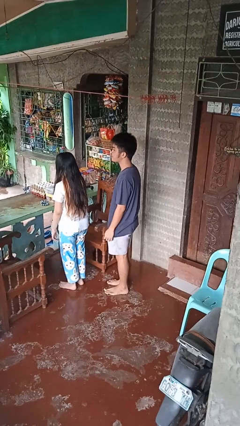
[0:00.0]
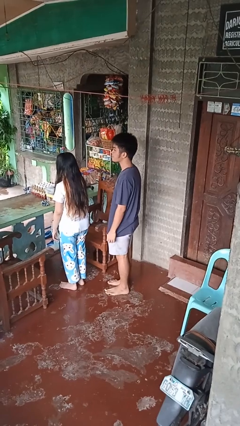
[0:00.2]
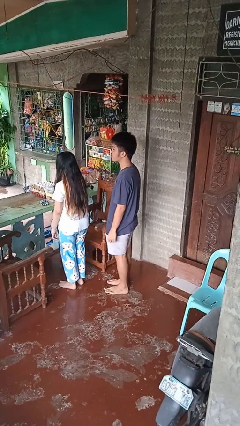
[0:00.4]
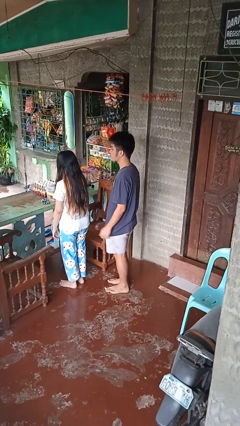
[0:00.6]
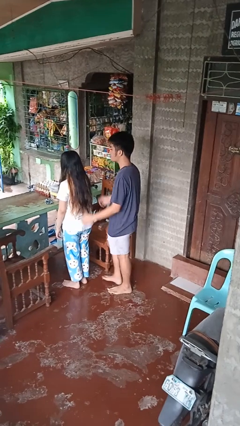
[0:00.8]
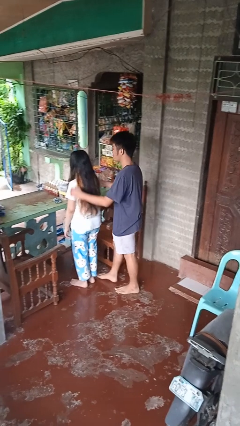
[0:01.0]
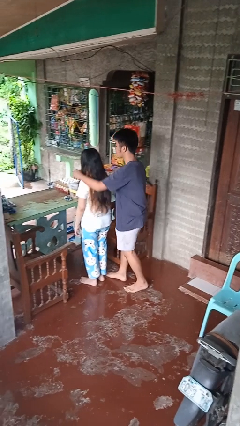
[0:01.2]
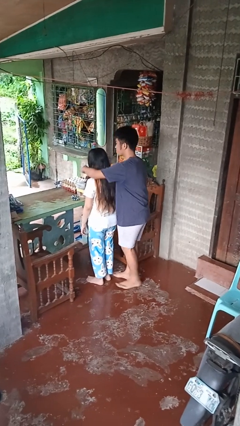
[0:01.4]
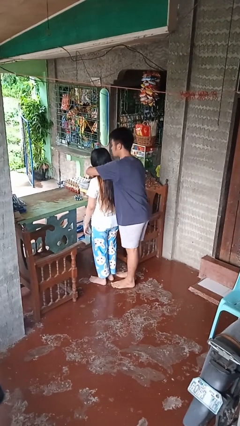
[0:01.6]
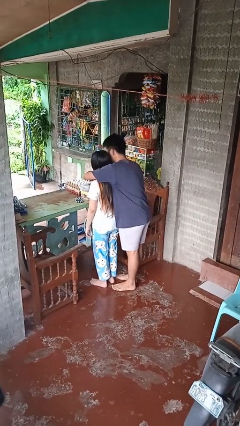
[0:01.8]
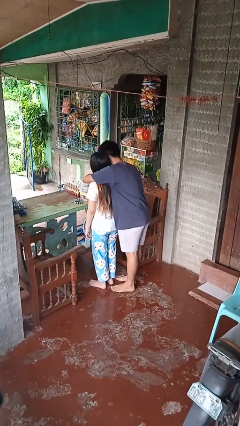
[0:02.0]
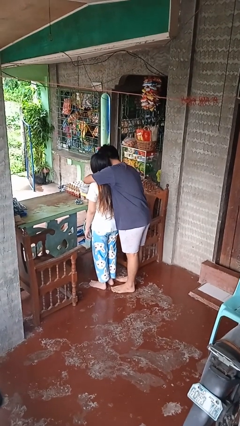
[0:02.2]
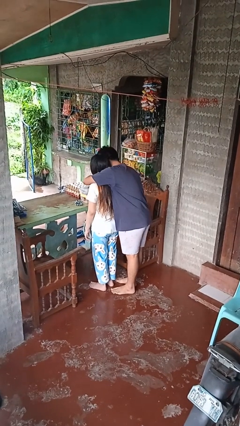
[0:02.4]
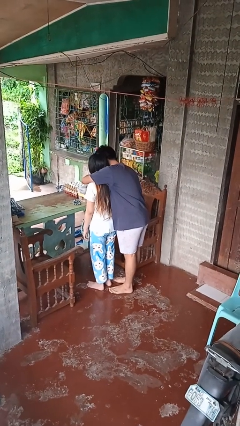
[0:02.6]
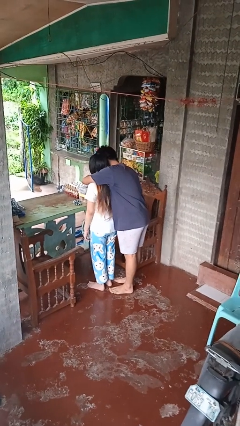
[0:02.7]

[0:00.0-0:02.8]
person hugs person from behind

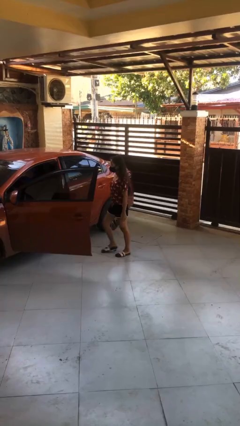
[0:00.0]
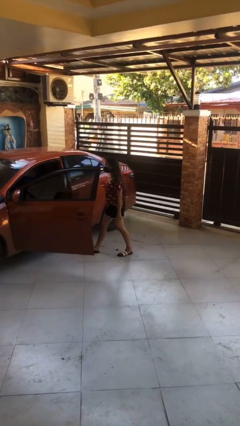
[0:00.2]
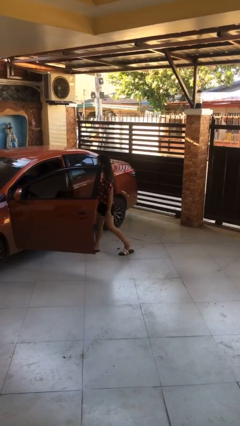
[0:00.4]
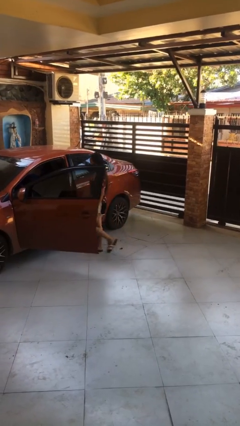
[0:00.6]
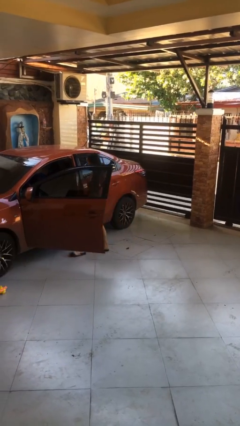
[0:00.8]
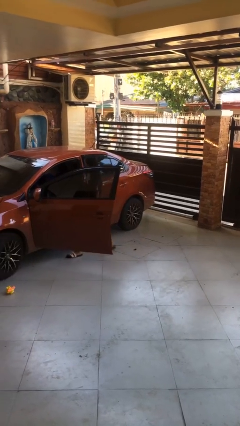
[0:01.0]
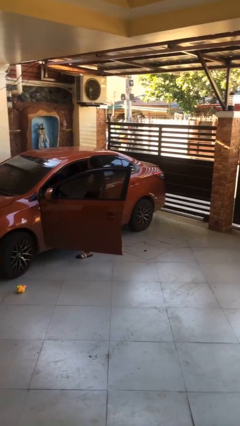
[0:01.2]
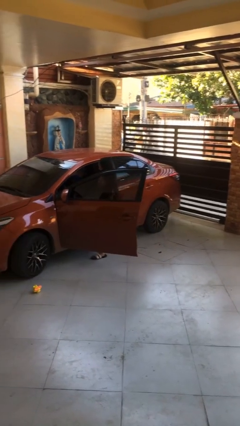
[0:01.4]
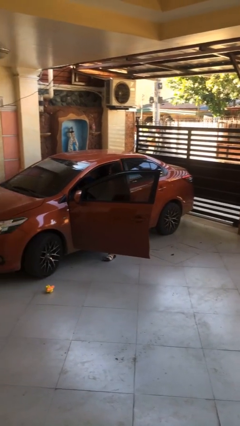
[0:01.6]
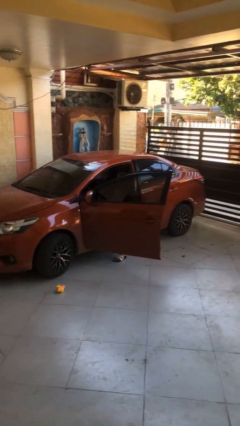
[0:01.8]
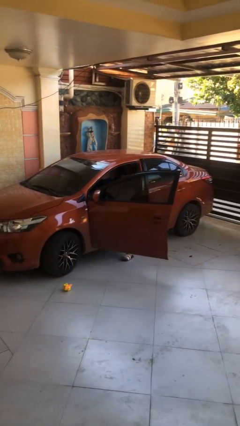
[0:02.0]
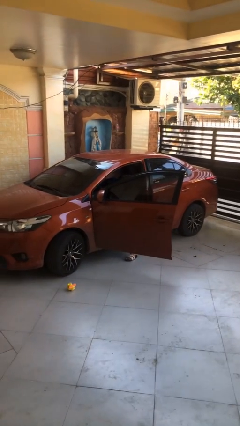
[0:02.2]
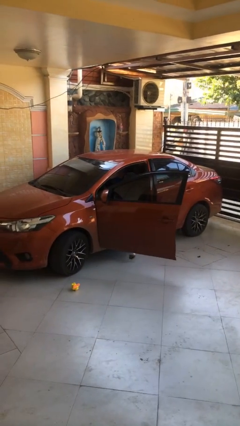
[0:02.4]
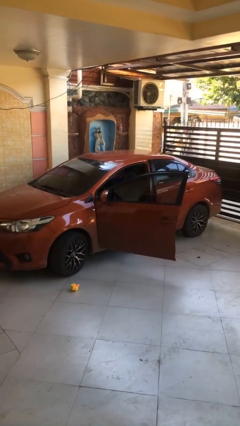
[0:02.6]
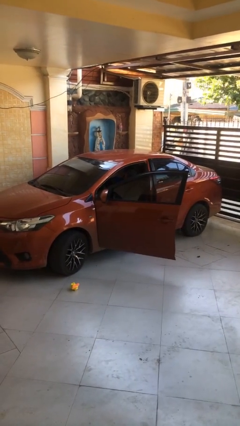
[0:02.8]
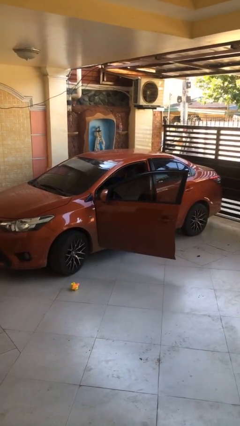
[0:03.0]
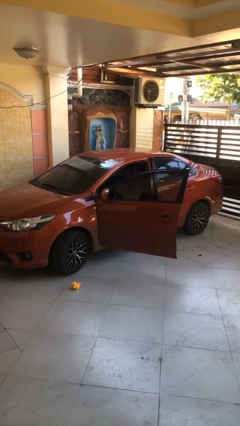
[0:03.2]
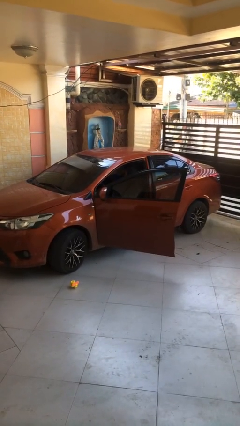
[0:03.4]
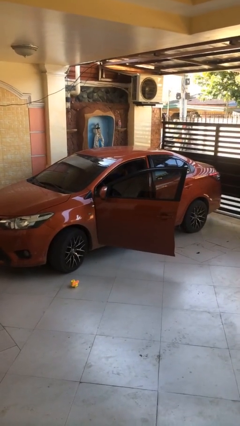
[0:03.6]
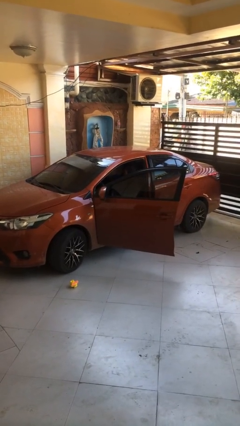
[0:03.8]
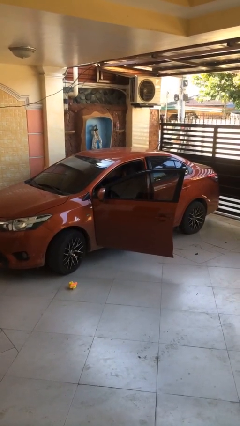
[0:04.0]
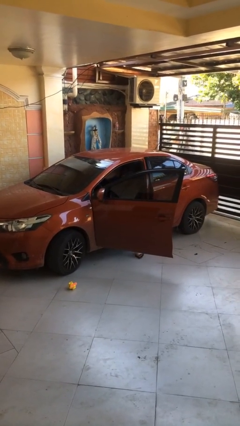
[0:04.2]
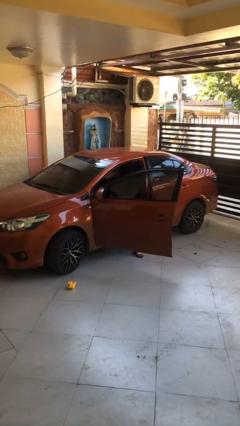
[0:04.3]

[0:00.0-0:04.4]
person enters car

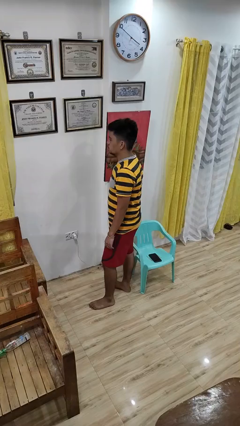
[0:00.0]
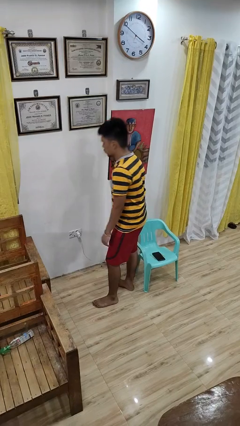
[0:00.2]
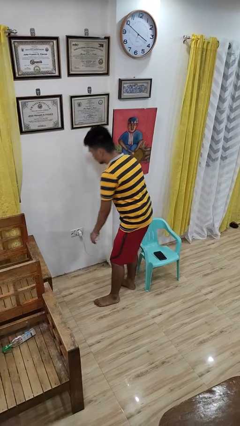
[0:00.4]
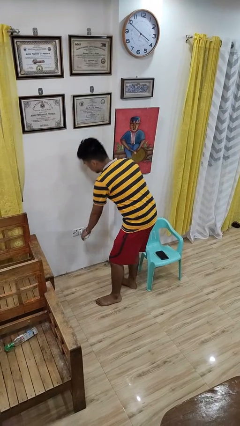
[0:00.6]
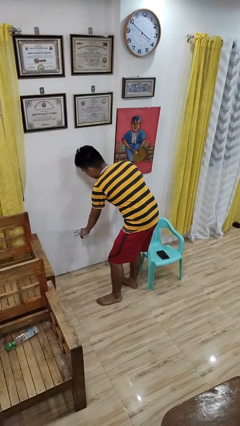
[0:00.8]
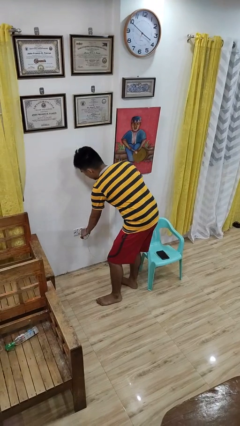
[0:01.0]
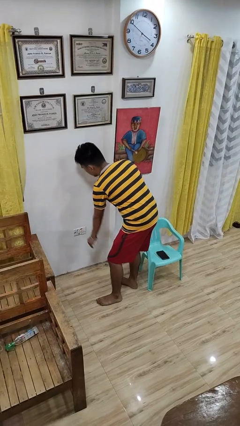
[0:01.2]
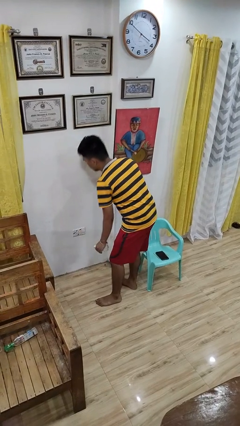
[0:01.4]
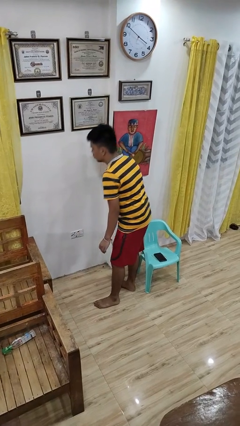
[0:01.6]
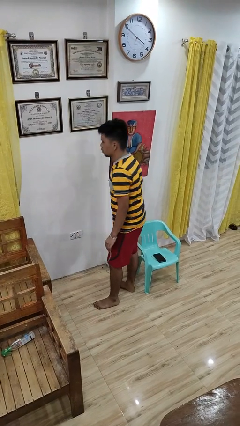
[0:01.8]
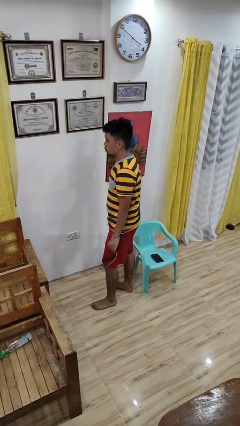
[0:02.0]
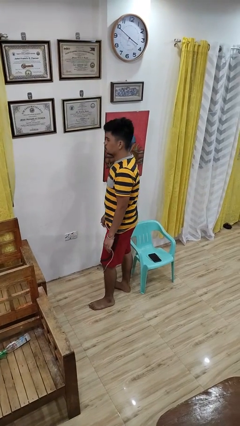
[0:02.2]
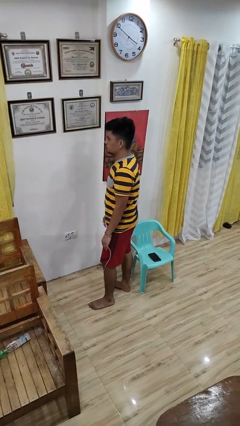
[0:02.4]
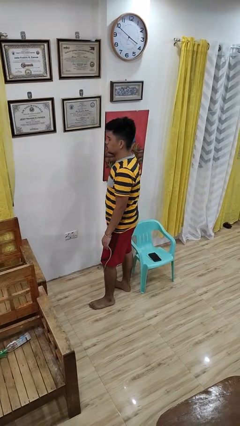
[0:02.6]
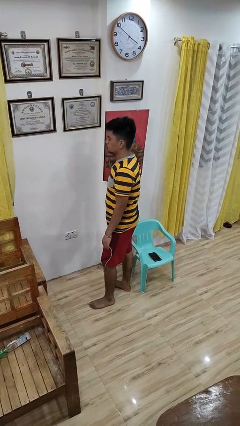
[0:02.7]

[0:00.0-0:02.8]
person unplugs from electrical socket

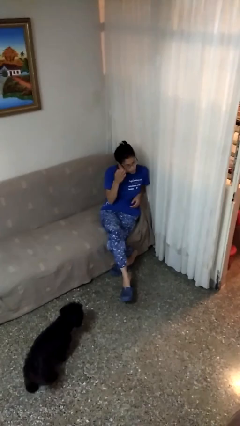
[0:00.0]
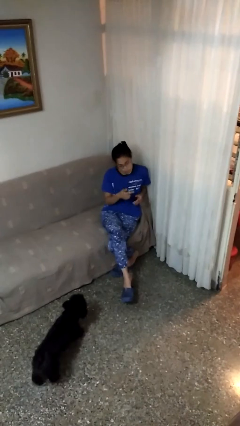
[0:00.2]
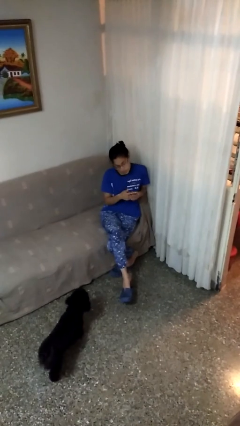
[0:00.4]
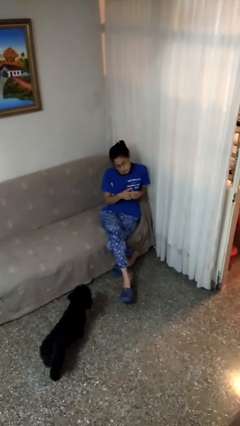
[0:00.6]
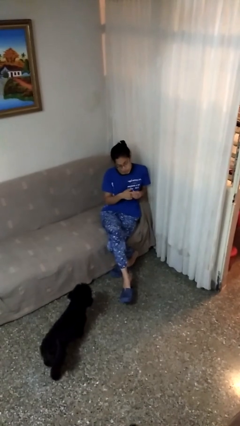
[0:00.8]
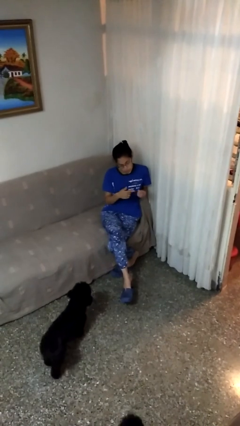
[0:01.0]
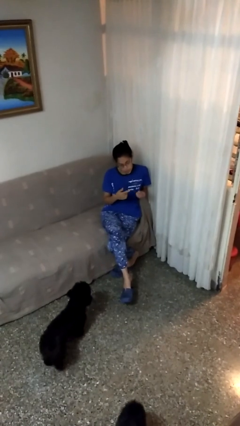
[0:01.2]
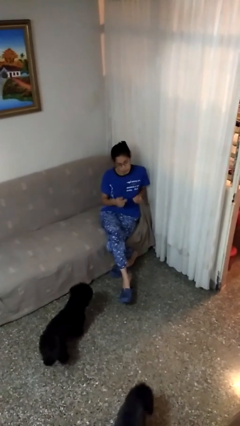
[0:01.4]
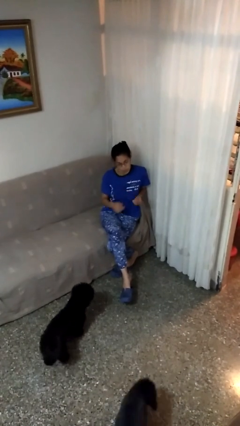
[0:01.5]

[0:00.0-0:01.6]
person takes off ring

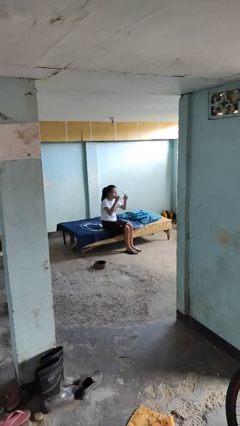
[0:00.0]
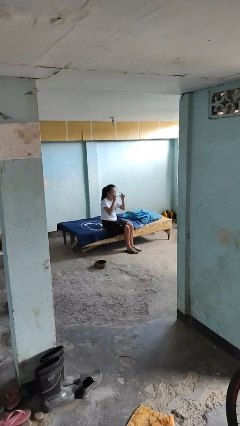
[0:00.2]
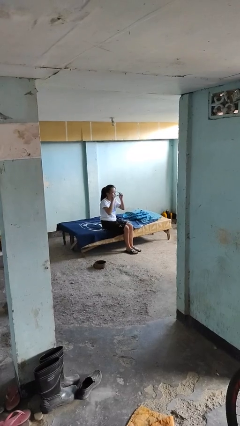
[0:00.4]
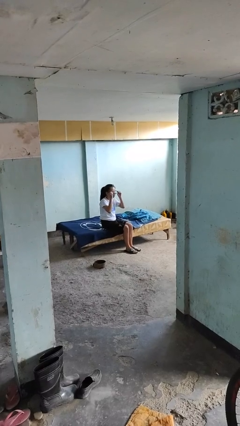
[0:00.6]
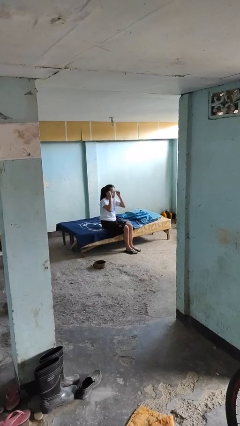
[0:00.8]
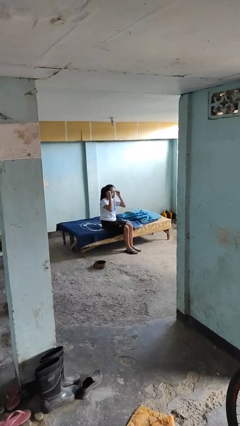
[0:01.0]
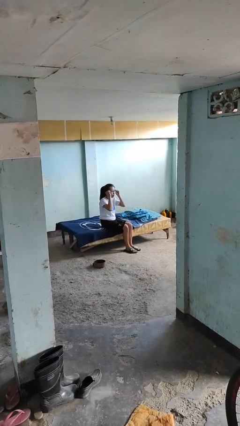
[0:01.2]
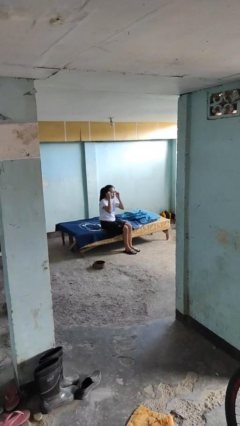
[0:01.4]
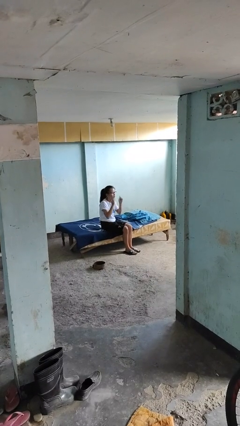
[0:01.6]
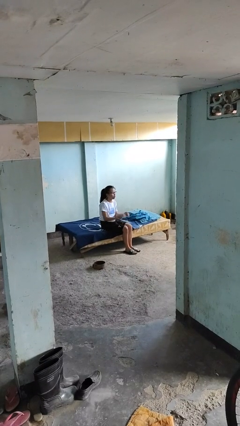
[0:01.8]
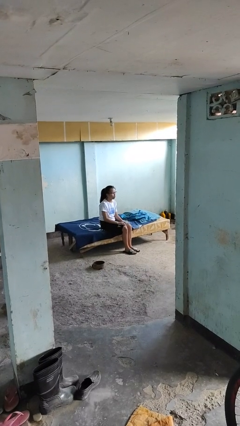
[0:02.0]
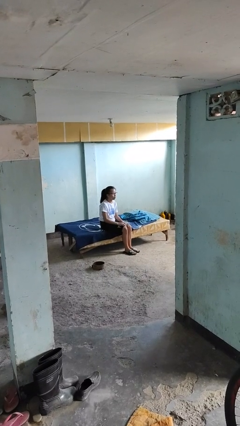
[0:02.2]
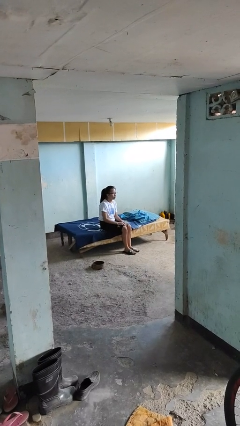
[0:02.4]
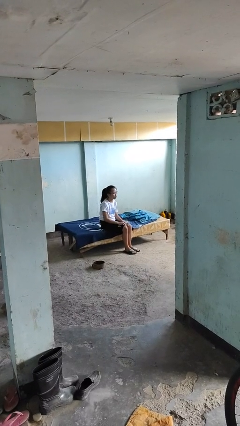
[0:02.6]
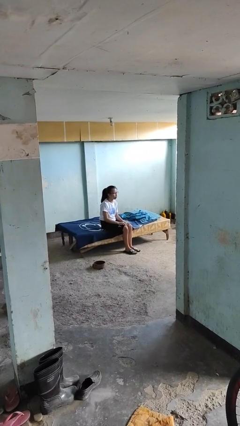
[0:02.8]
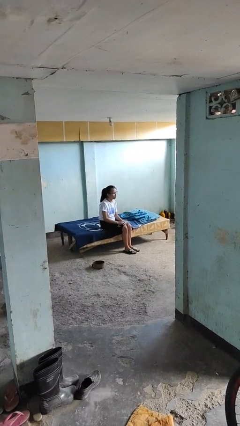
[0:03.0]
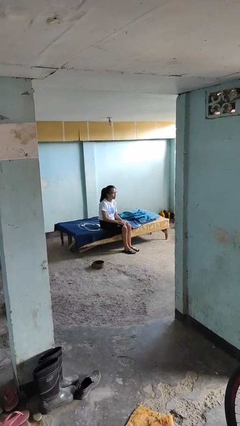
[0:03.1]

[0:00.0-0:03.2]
person puts on glasses

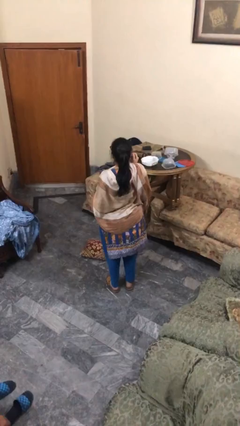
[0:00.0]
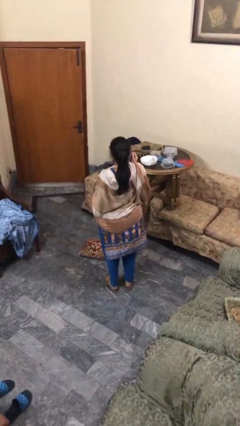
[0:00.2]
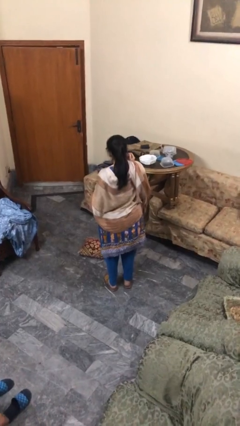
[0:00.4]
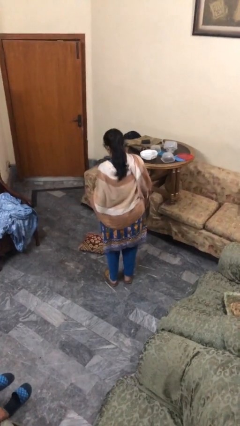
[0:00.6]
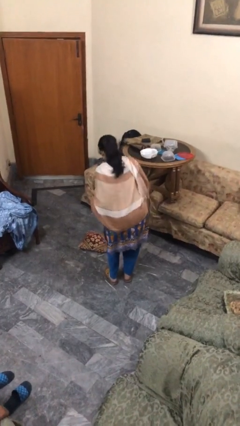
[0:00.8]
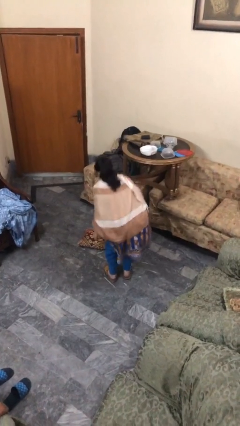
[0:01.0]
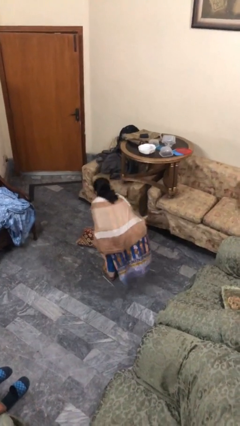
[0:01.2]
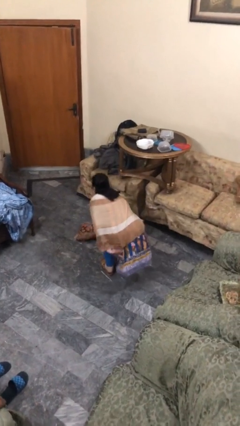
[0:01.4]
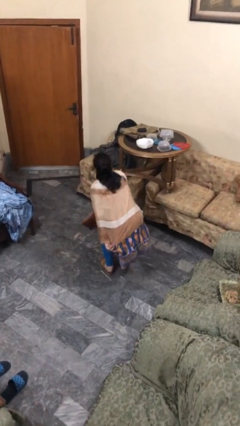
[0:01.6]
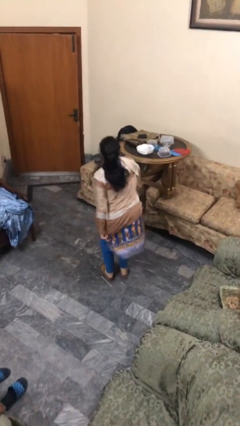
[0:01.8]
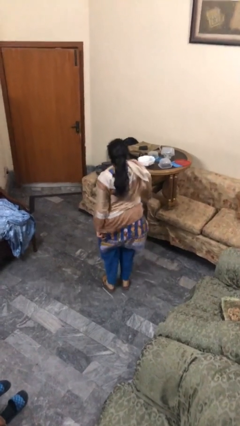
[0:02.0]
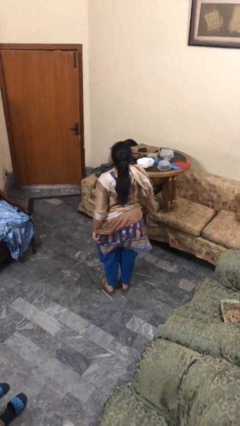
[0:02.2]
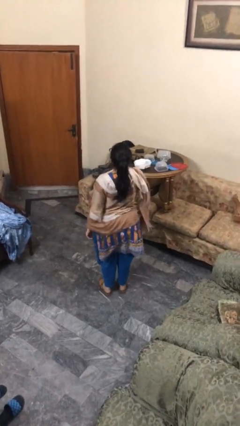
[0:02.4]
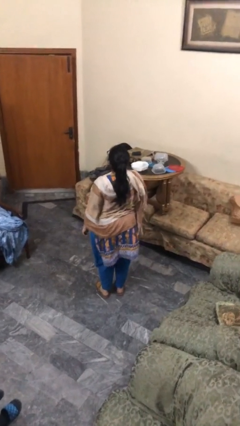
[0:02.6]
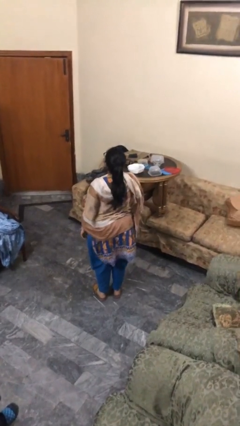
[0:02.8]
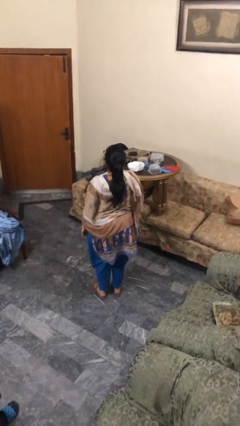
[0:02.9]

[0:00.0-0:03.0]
person picks up object from floor
